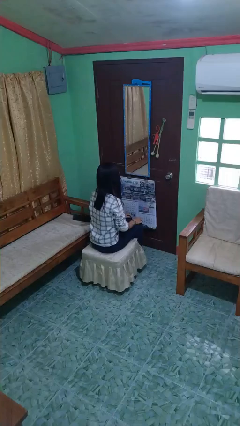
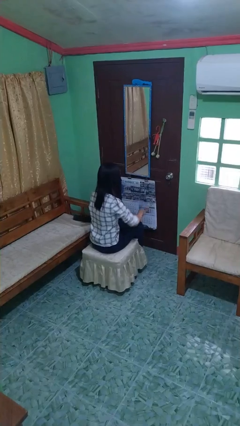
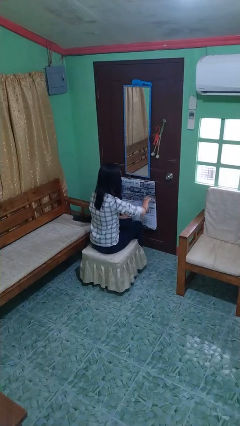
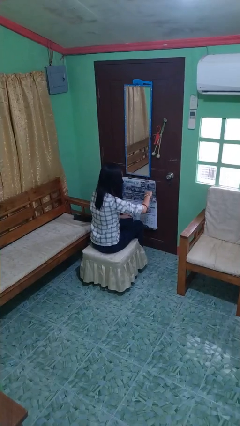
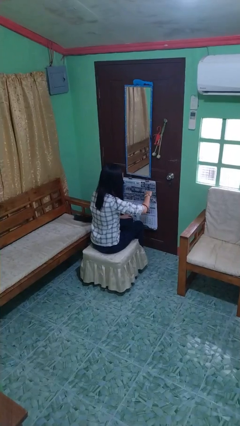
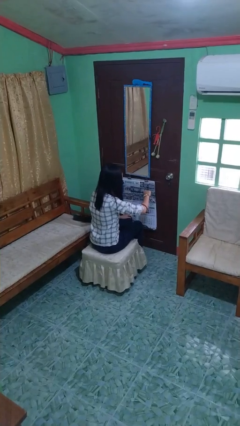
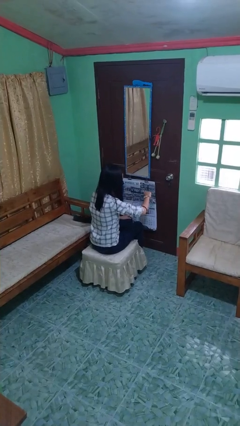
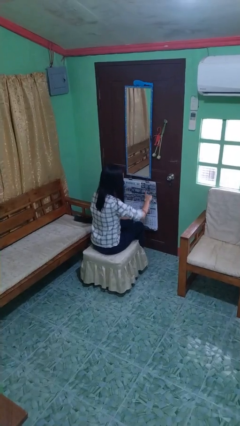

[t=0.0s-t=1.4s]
person looks at wristwatch

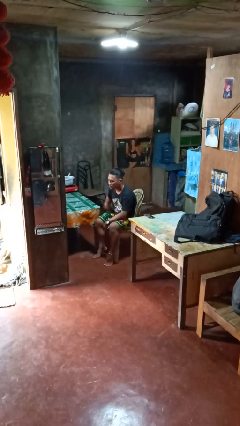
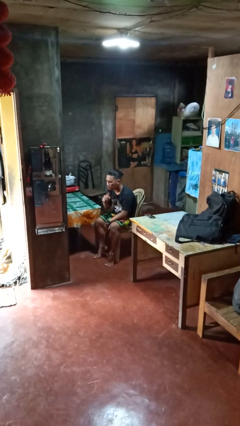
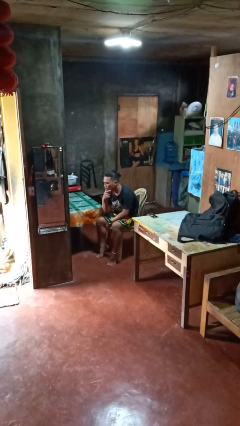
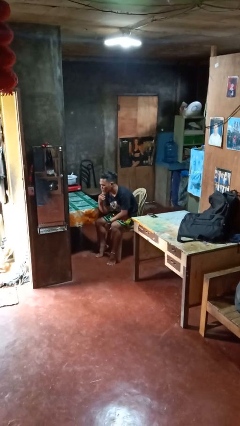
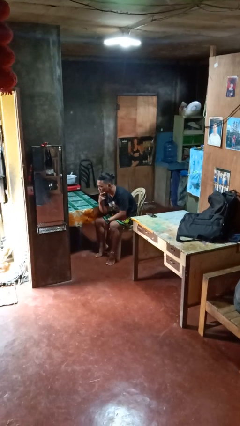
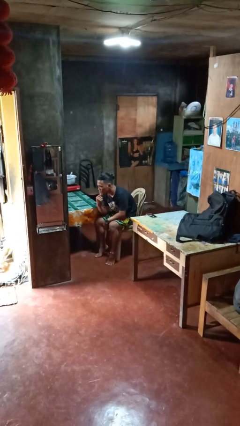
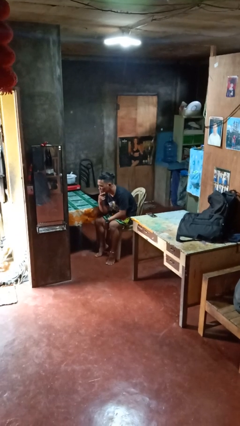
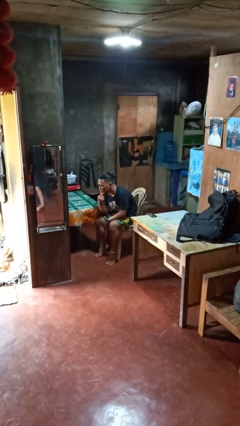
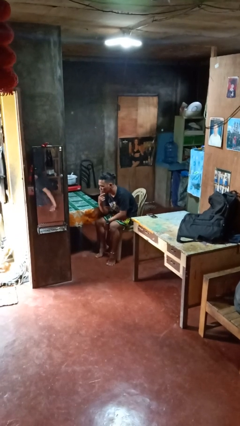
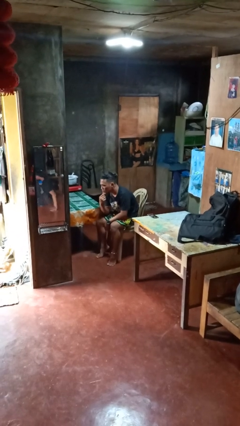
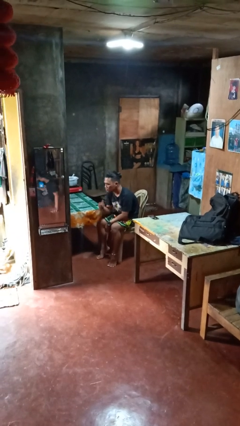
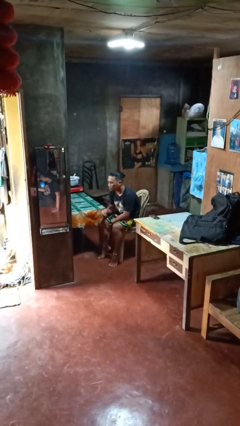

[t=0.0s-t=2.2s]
person strokes chin

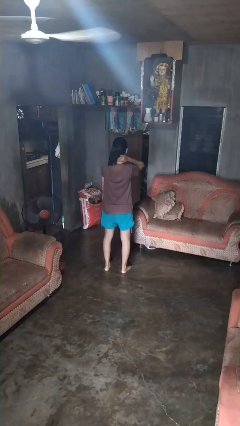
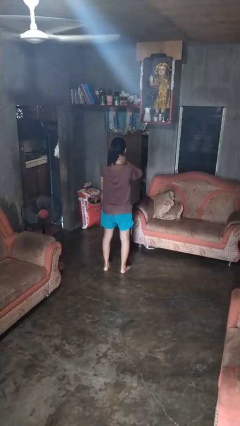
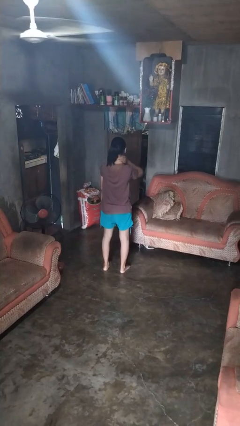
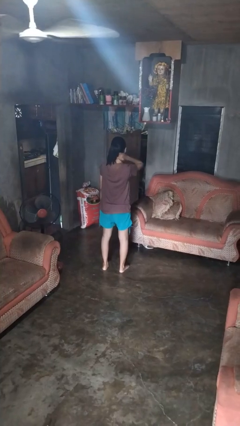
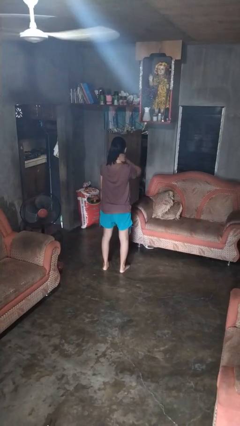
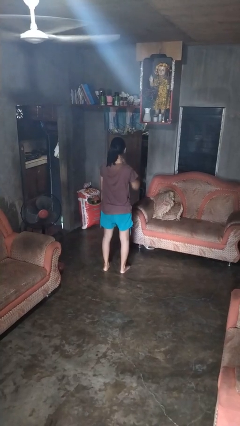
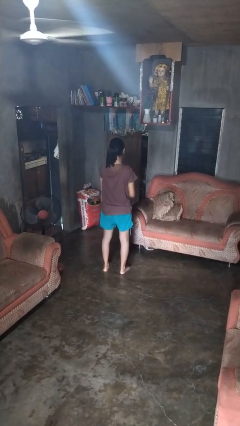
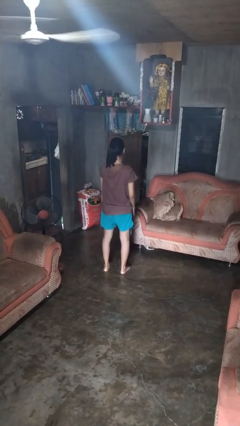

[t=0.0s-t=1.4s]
person rubs neck

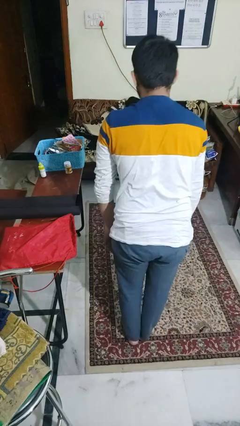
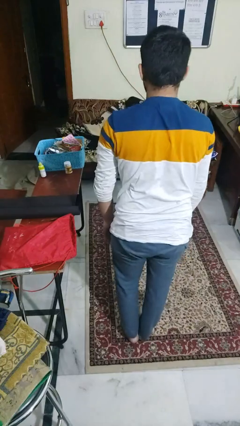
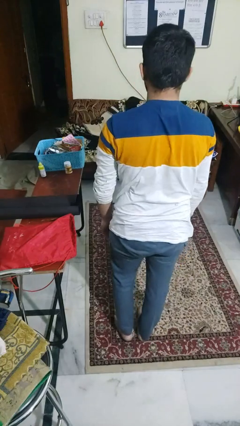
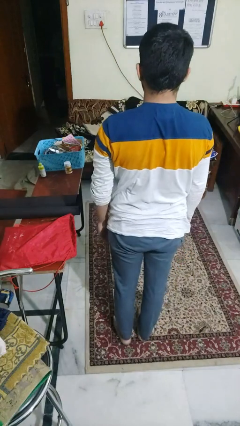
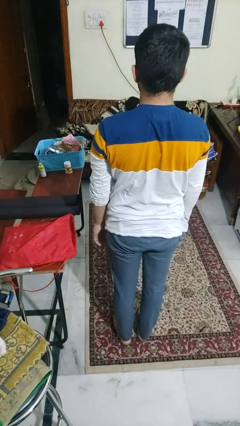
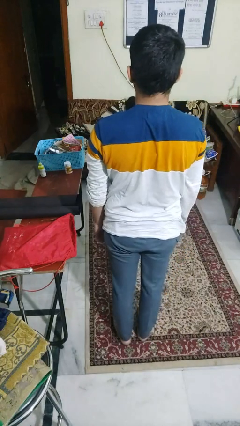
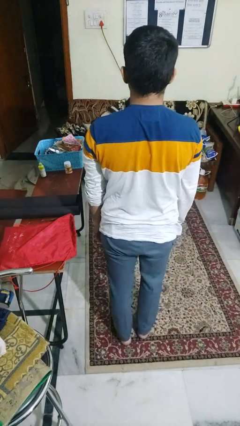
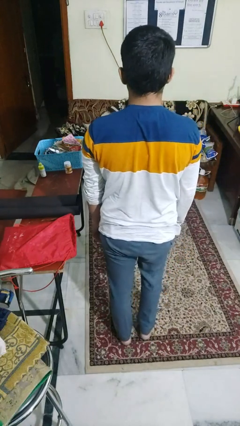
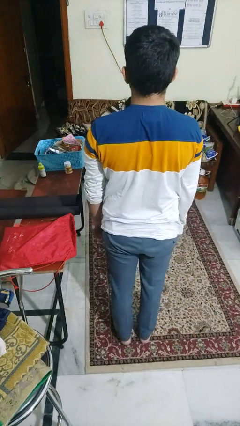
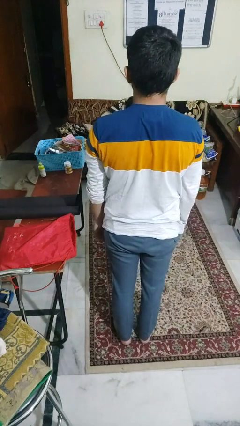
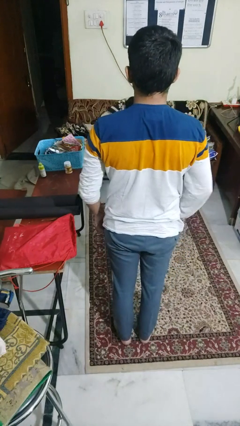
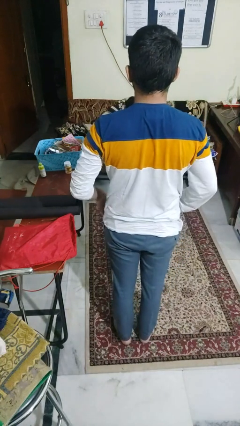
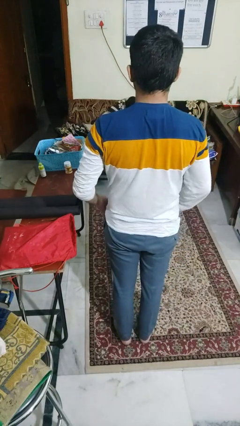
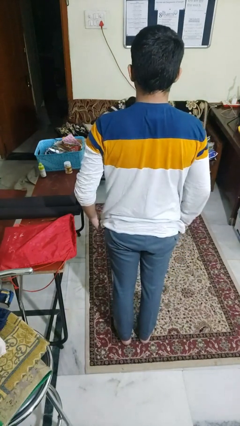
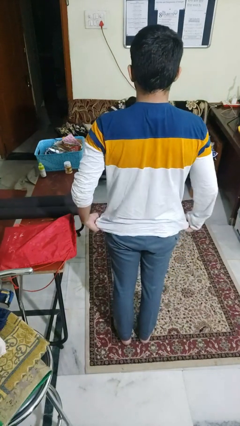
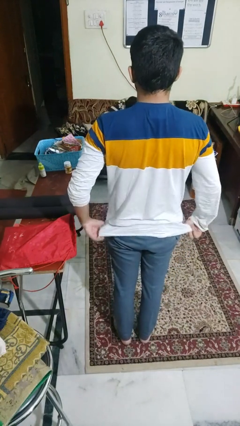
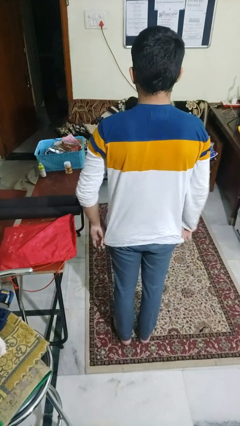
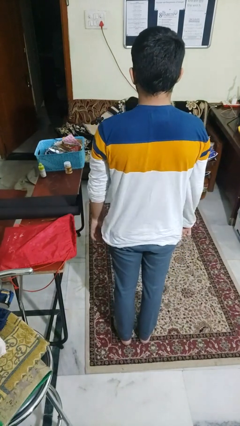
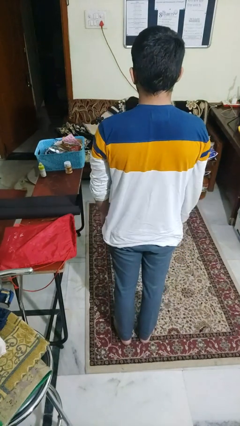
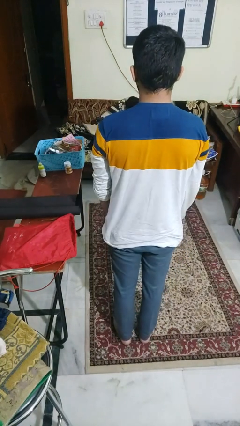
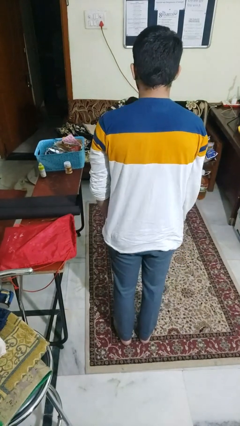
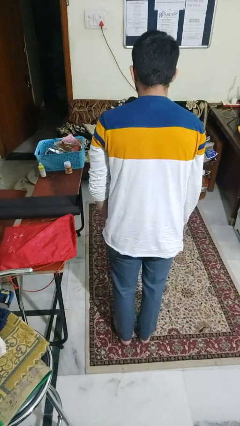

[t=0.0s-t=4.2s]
person stands up from floor

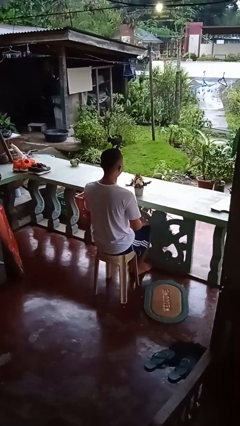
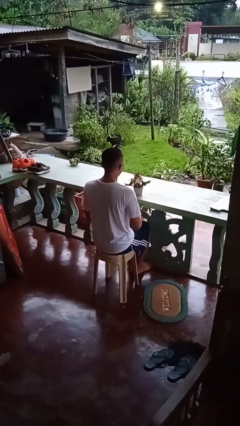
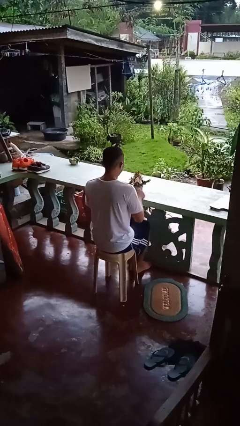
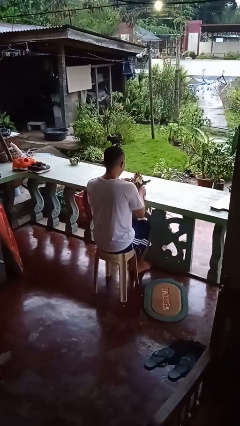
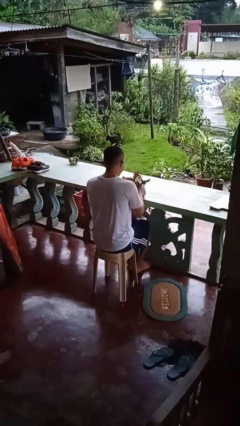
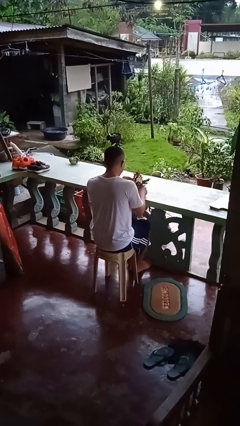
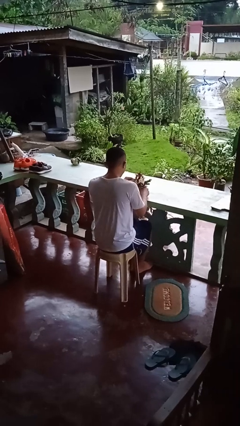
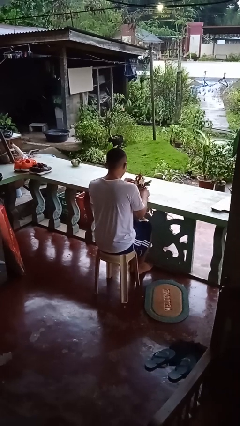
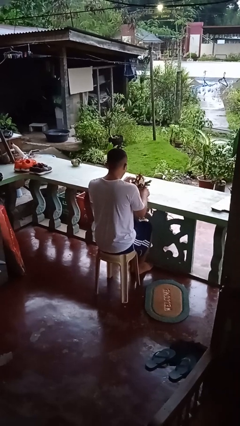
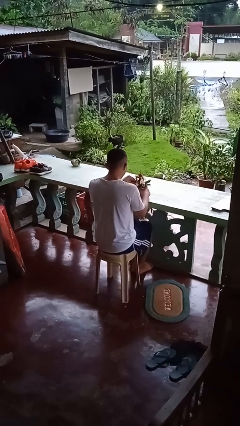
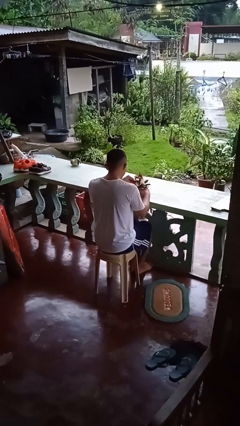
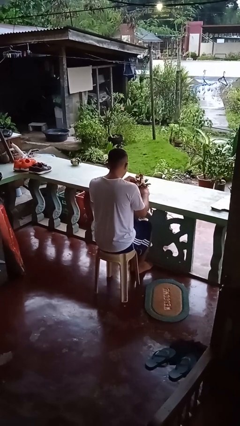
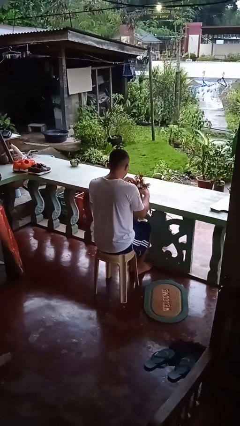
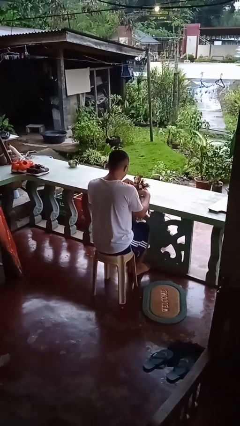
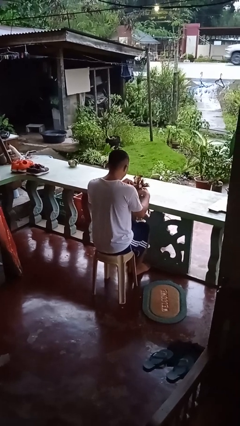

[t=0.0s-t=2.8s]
person arranges flowers in vase

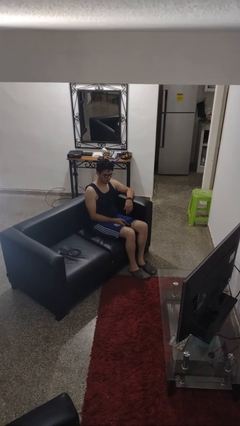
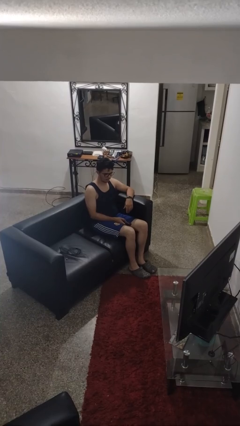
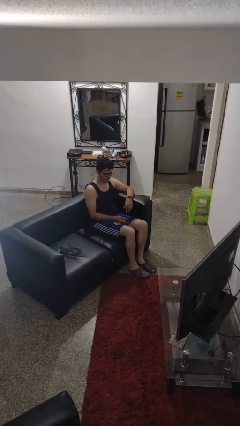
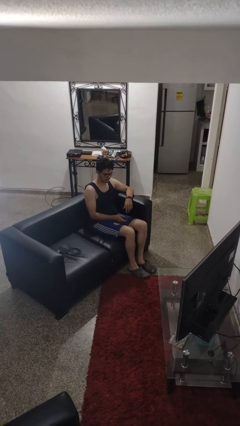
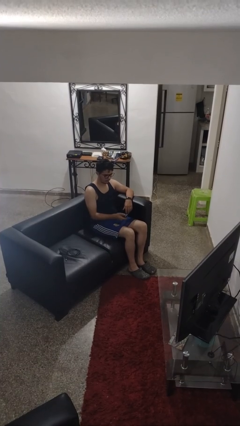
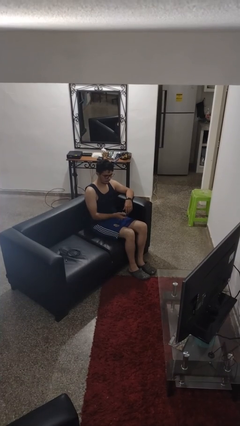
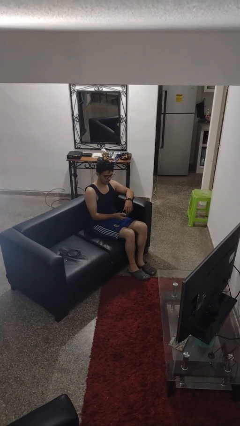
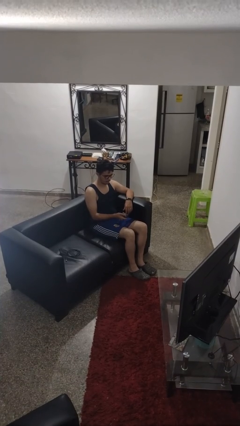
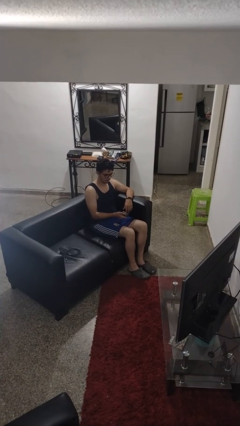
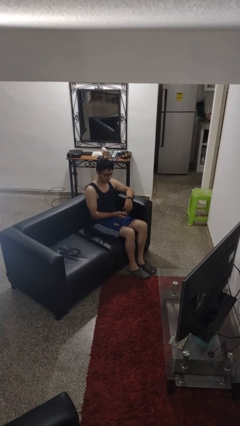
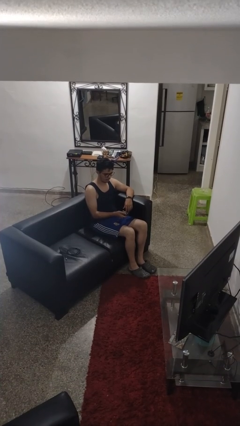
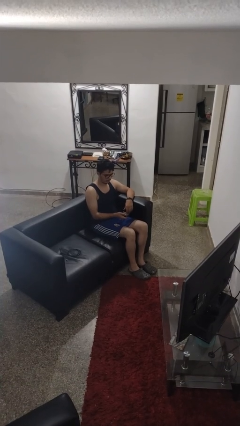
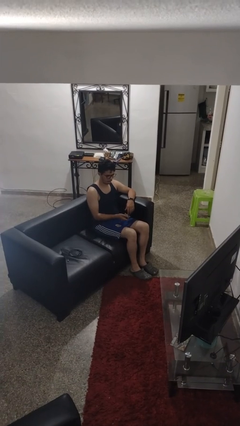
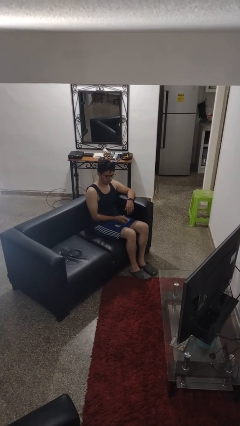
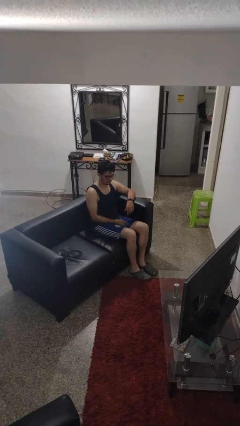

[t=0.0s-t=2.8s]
person uses television remote

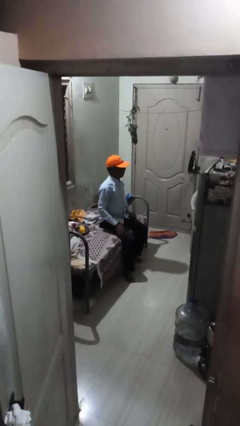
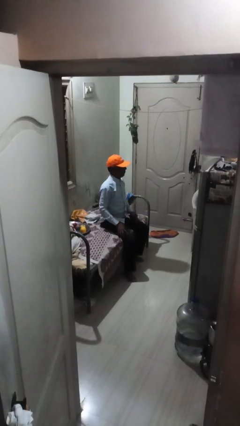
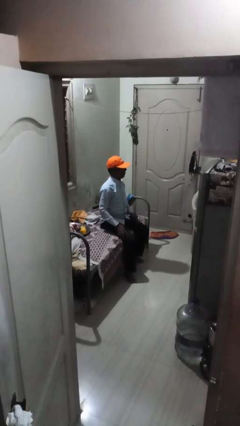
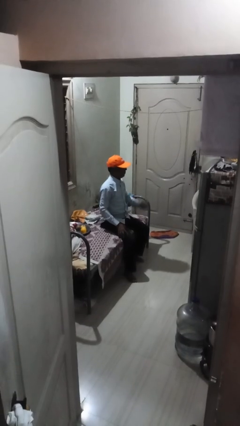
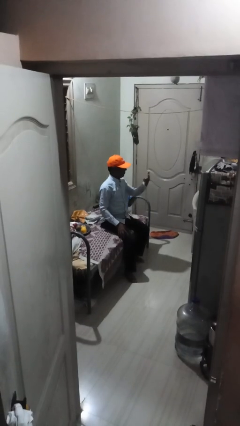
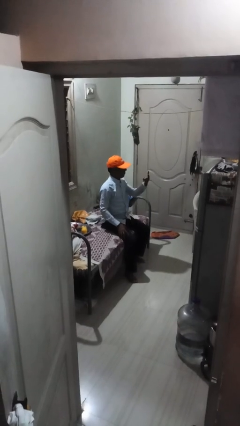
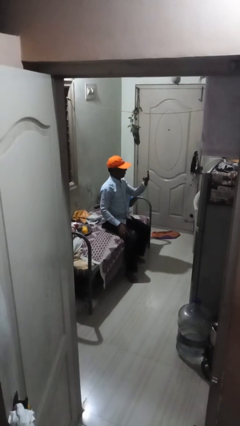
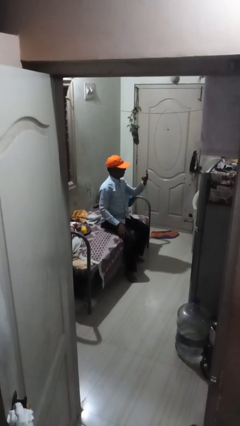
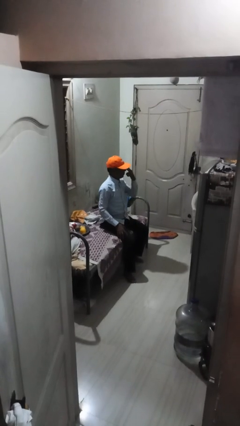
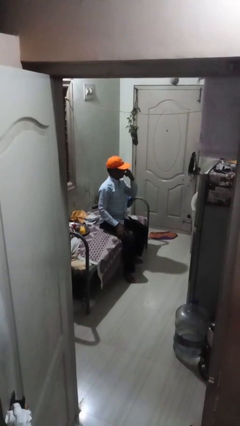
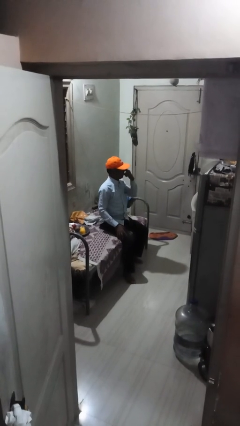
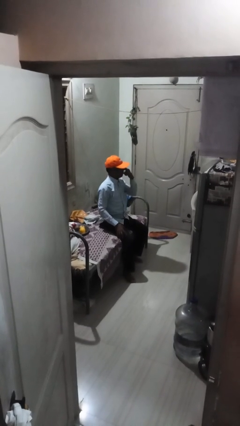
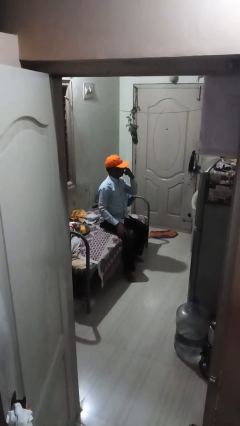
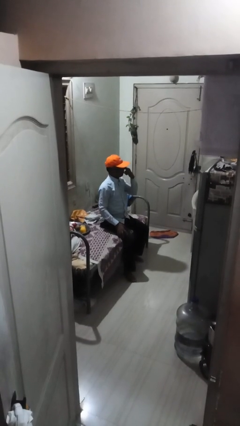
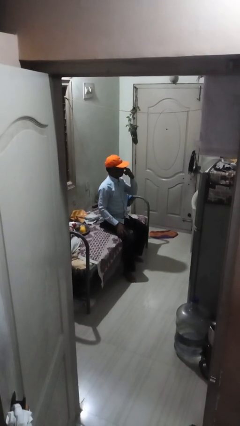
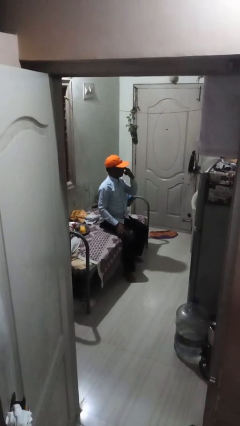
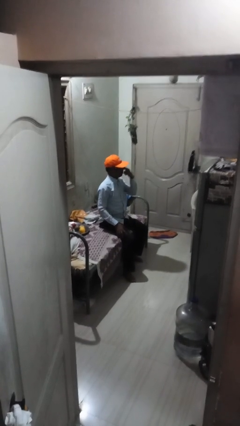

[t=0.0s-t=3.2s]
person gestures watch closely
